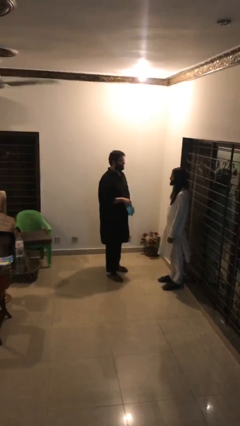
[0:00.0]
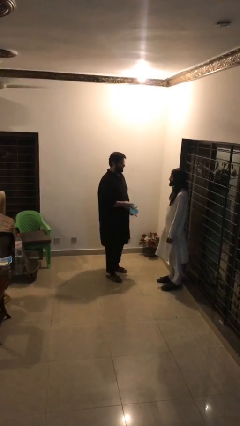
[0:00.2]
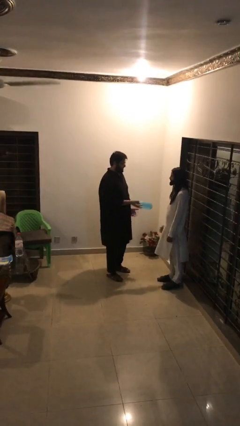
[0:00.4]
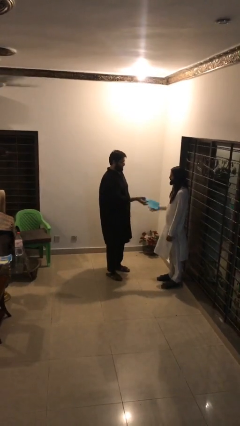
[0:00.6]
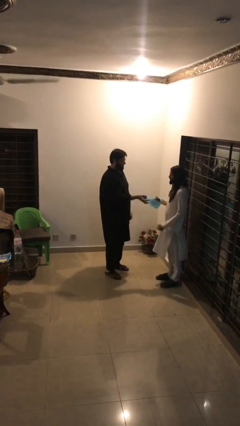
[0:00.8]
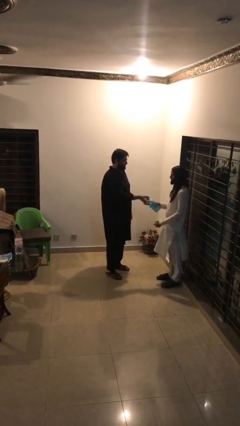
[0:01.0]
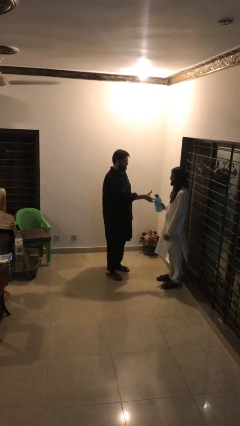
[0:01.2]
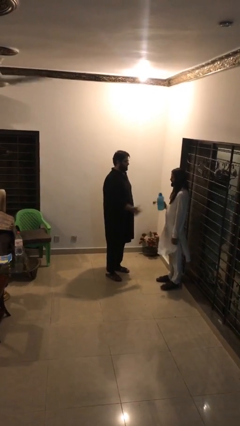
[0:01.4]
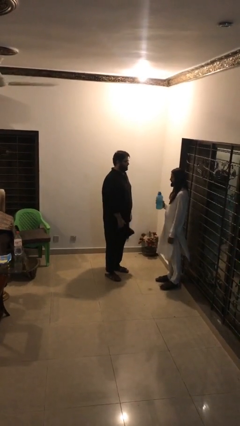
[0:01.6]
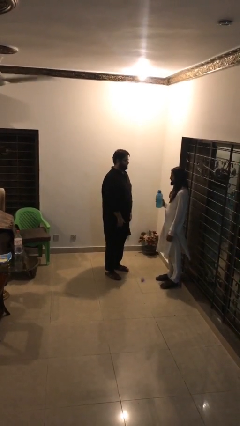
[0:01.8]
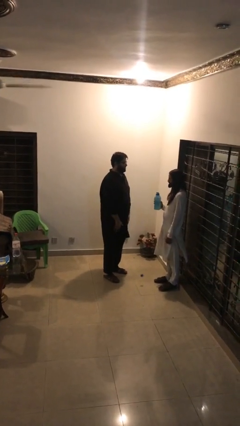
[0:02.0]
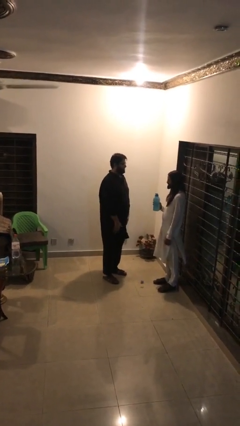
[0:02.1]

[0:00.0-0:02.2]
person transfers object to person

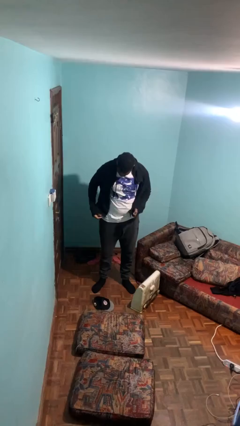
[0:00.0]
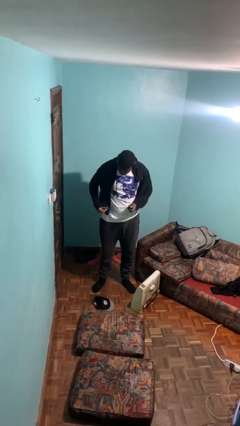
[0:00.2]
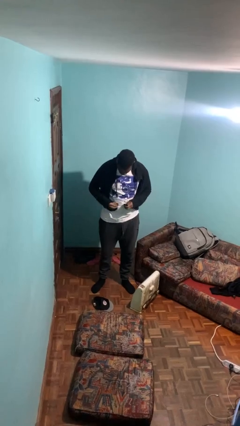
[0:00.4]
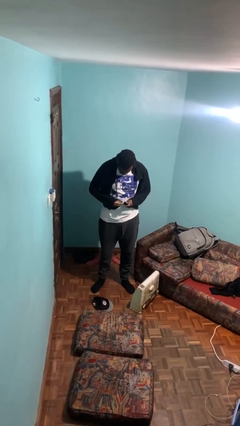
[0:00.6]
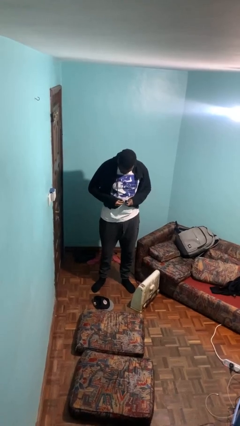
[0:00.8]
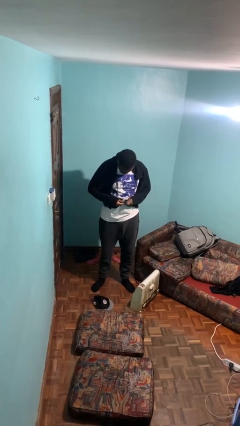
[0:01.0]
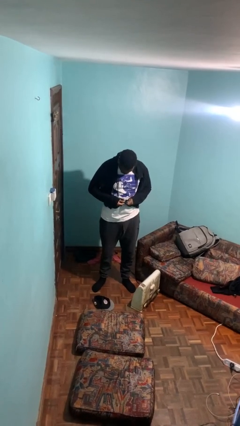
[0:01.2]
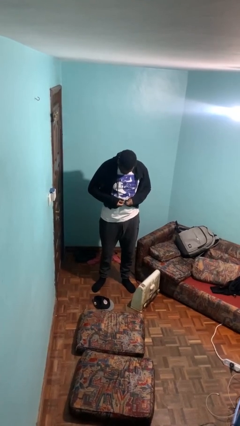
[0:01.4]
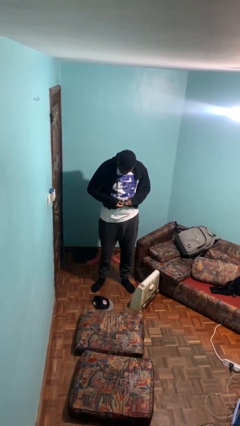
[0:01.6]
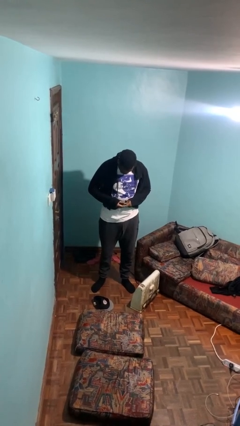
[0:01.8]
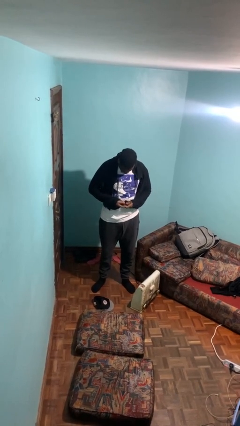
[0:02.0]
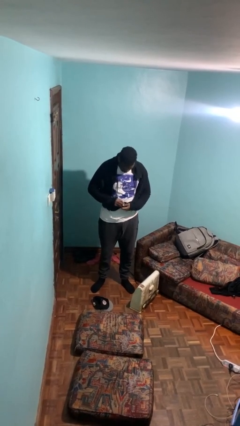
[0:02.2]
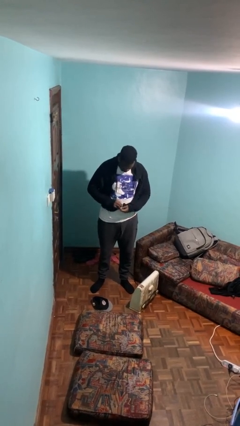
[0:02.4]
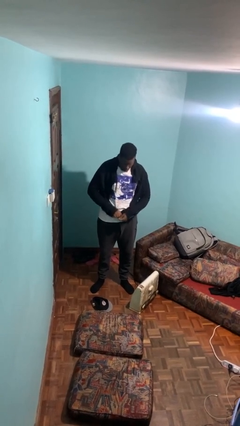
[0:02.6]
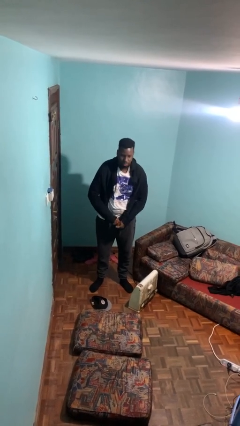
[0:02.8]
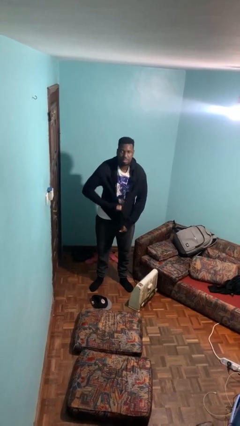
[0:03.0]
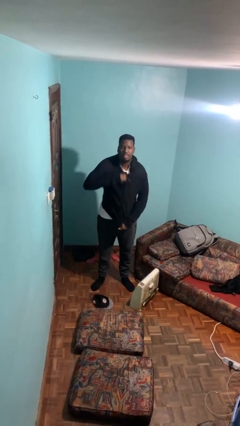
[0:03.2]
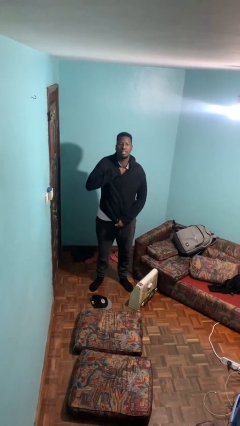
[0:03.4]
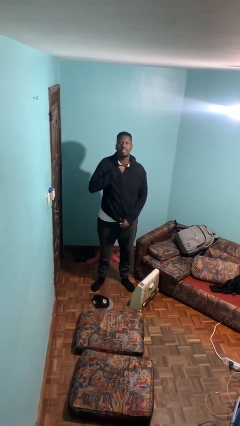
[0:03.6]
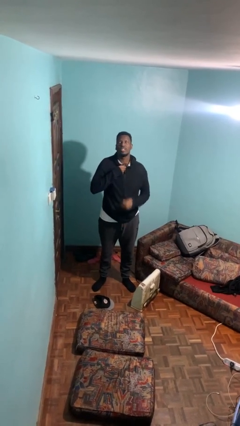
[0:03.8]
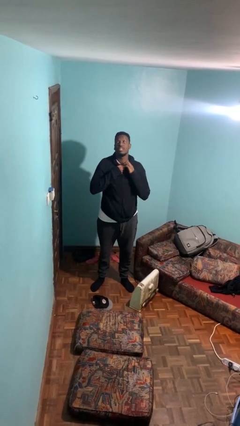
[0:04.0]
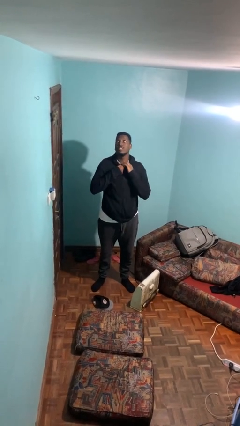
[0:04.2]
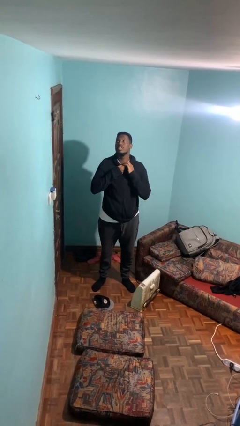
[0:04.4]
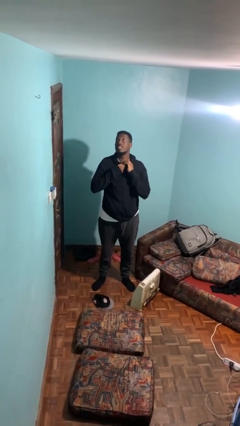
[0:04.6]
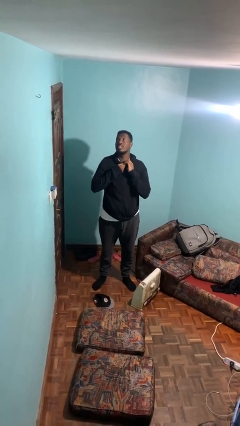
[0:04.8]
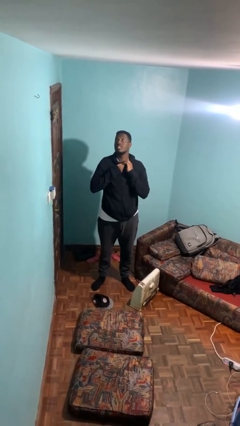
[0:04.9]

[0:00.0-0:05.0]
person zips up jacket

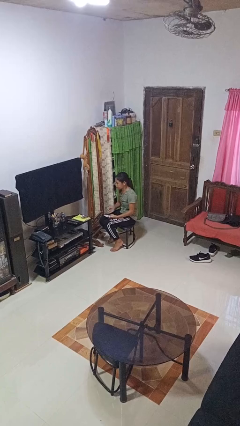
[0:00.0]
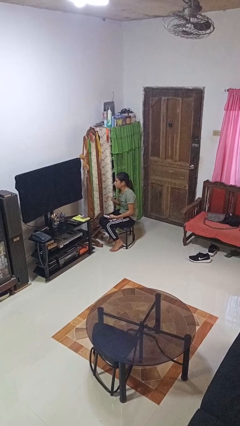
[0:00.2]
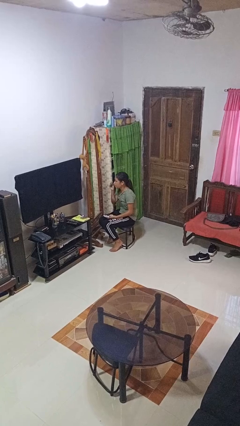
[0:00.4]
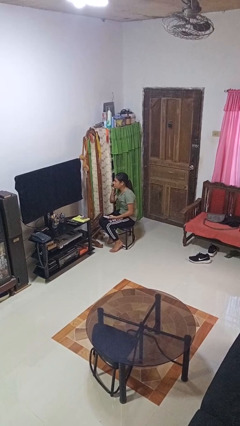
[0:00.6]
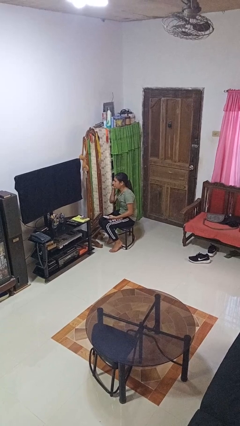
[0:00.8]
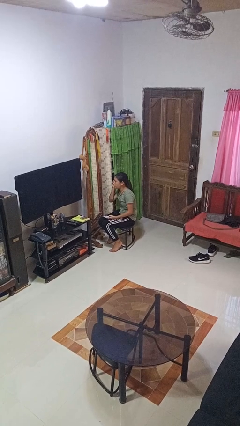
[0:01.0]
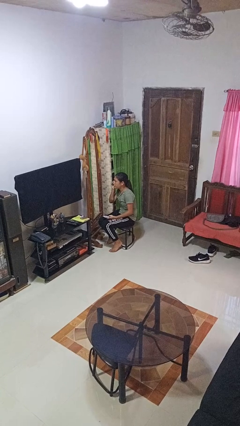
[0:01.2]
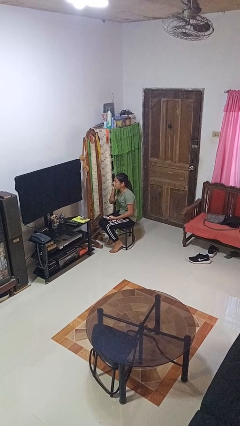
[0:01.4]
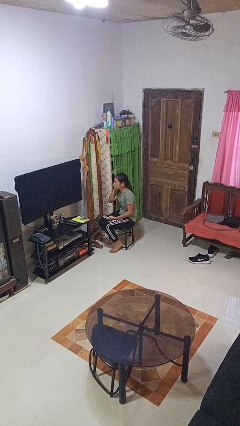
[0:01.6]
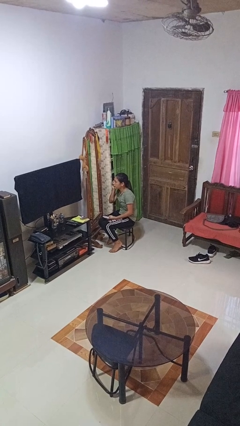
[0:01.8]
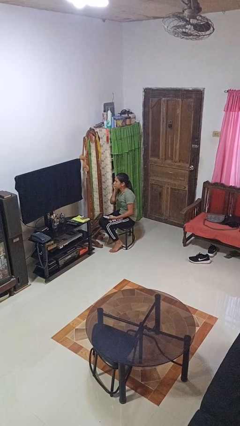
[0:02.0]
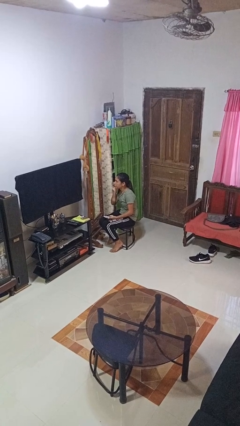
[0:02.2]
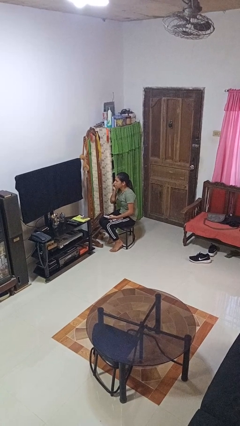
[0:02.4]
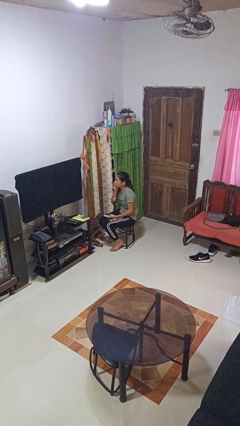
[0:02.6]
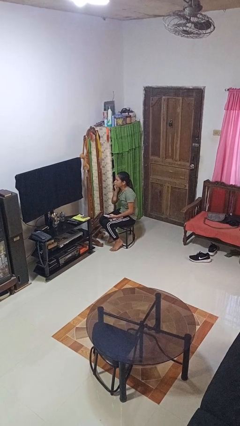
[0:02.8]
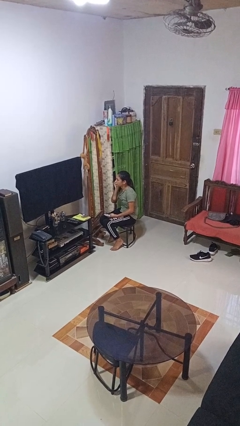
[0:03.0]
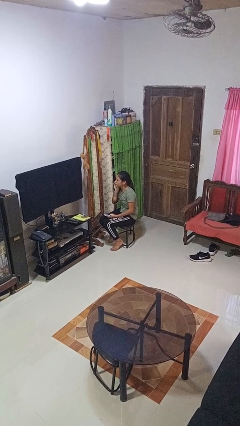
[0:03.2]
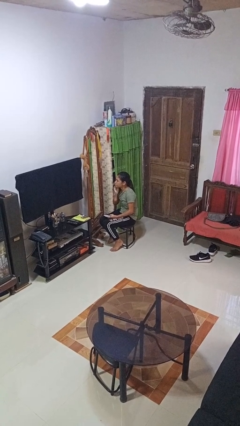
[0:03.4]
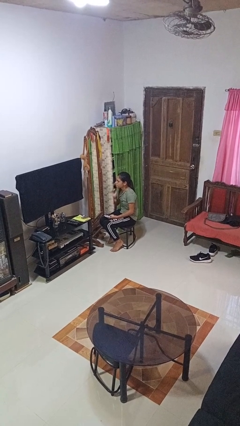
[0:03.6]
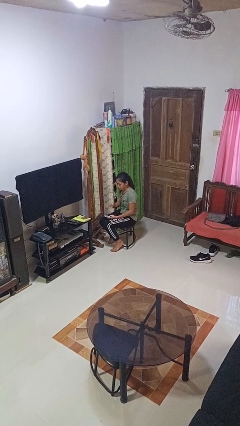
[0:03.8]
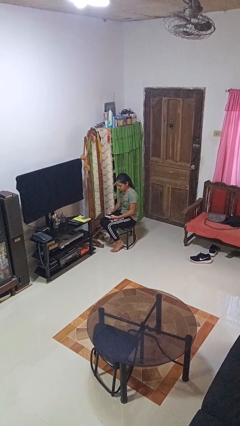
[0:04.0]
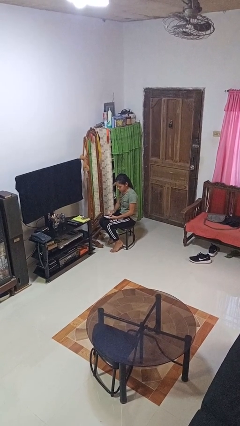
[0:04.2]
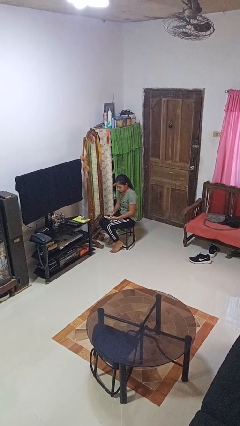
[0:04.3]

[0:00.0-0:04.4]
person applies foundation makeup

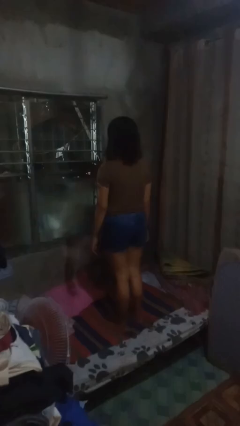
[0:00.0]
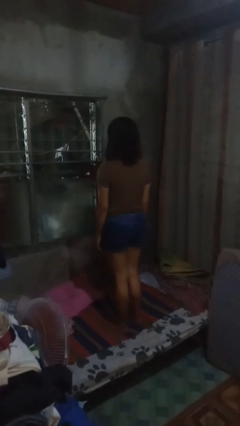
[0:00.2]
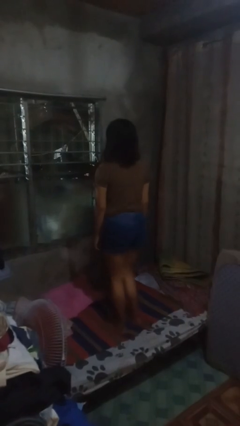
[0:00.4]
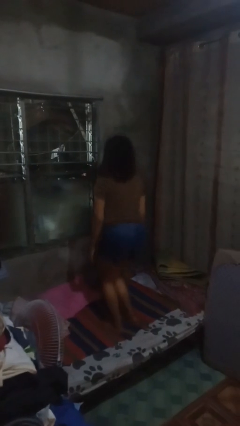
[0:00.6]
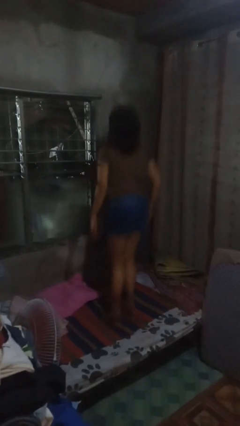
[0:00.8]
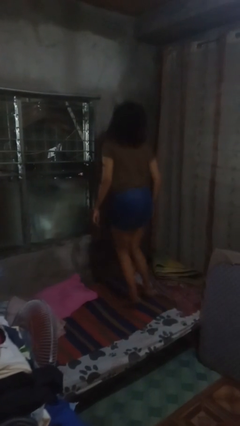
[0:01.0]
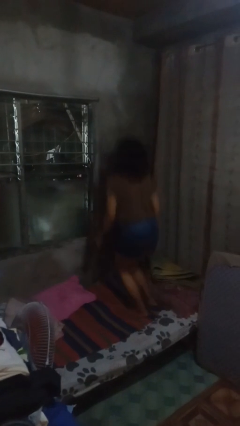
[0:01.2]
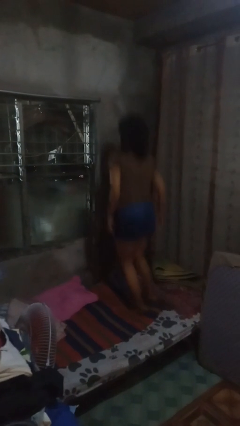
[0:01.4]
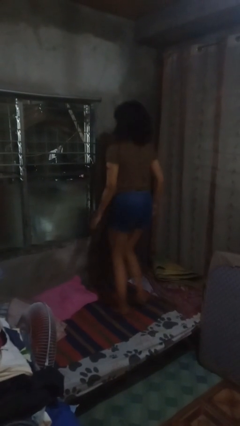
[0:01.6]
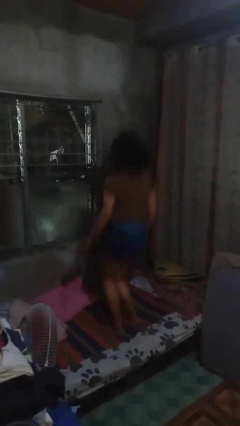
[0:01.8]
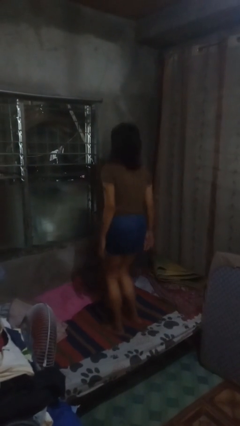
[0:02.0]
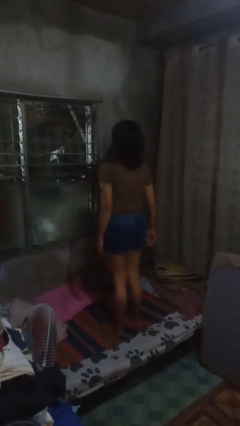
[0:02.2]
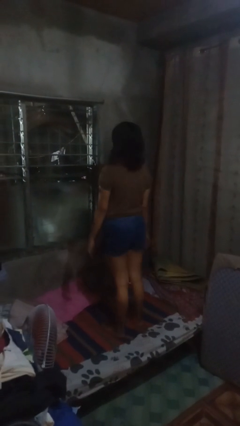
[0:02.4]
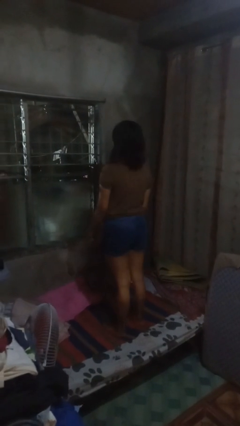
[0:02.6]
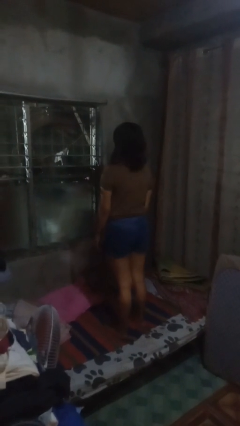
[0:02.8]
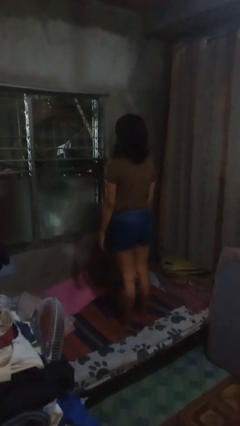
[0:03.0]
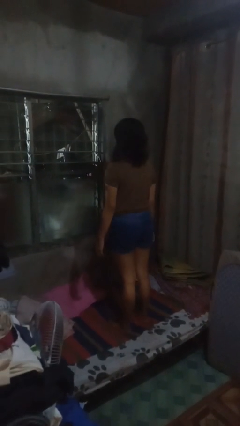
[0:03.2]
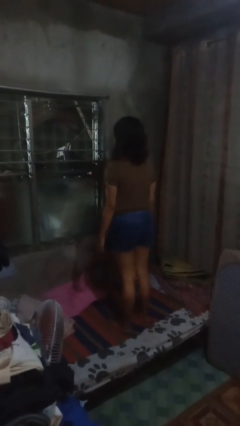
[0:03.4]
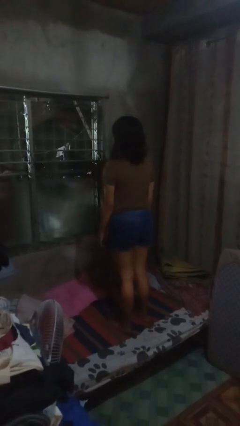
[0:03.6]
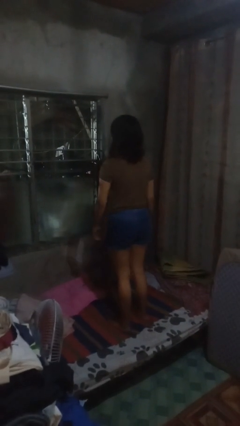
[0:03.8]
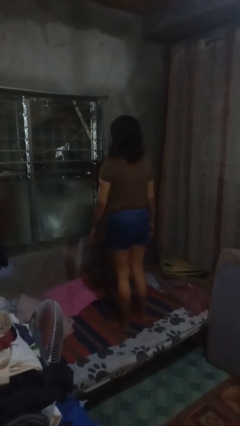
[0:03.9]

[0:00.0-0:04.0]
person jumps on bed

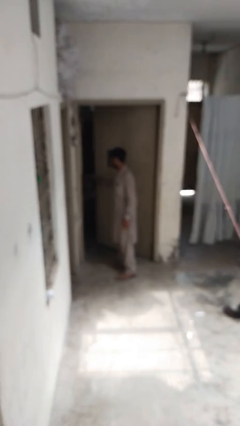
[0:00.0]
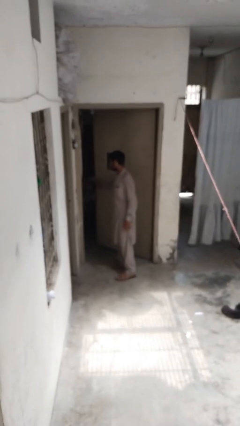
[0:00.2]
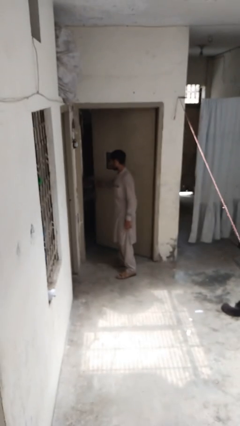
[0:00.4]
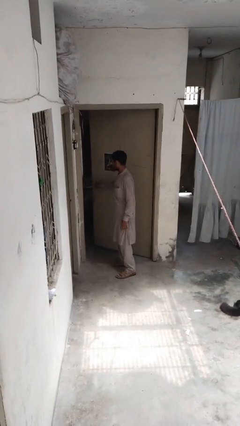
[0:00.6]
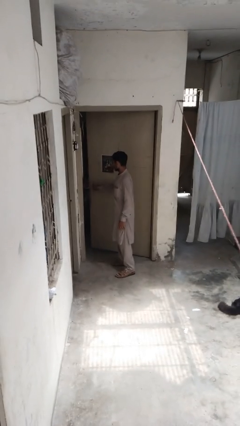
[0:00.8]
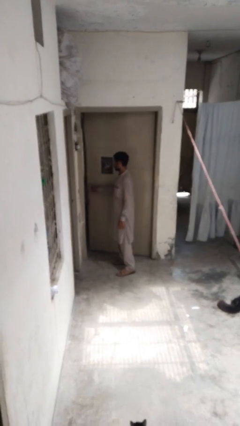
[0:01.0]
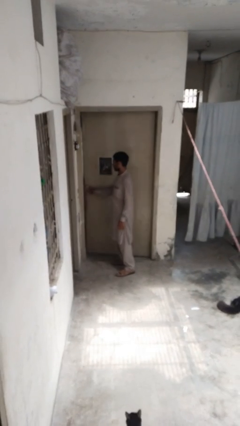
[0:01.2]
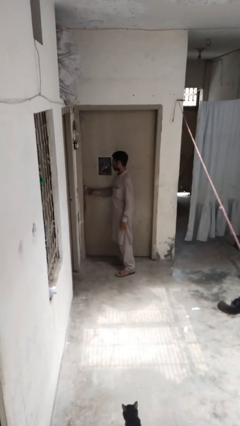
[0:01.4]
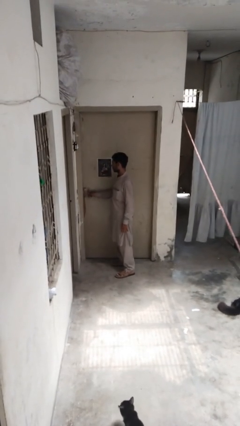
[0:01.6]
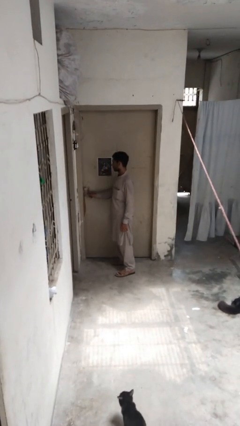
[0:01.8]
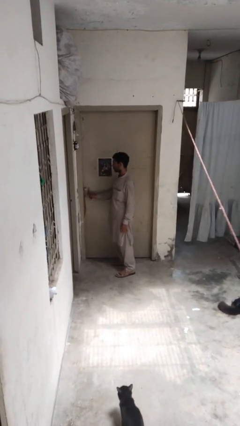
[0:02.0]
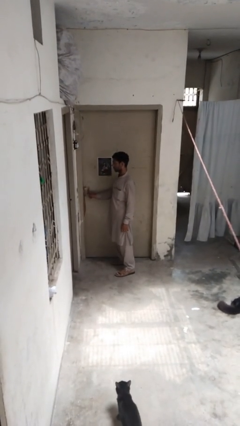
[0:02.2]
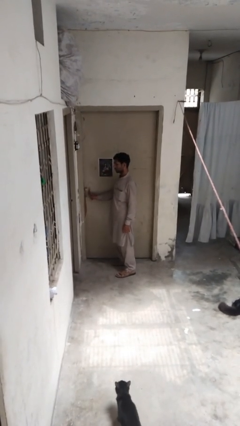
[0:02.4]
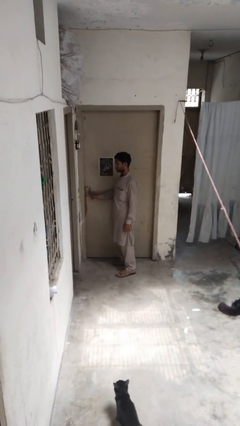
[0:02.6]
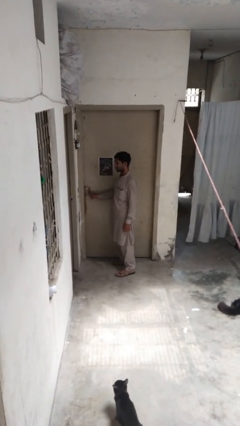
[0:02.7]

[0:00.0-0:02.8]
person closes gate
